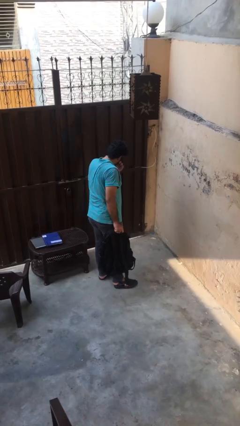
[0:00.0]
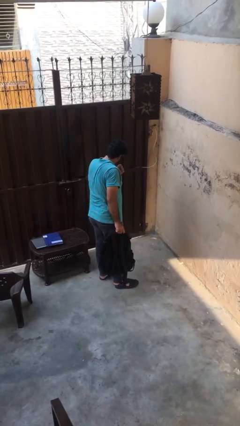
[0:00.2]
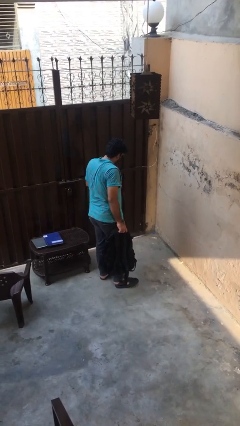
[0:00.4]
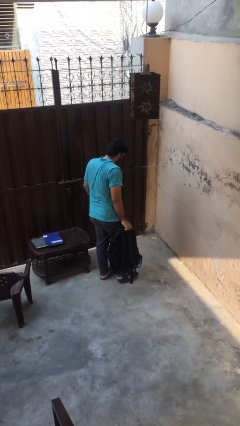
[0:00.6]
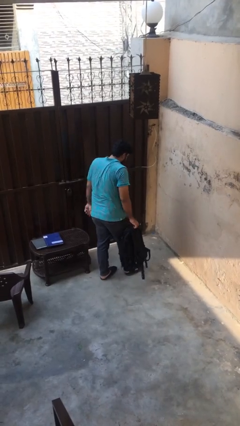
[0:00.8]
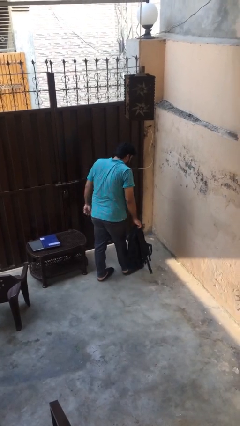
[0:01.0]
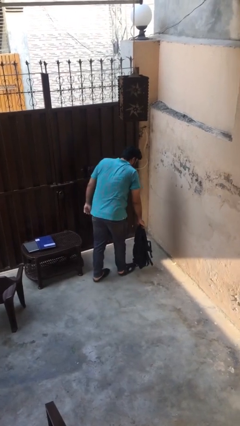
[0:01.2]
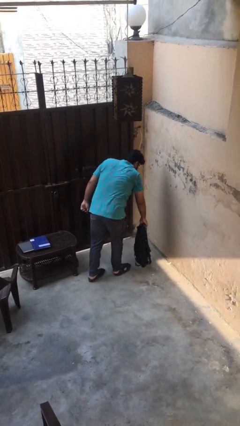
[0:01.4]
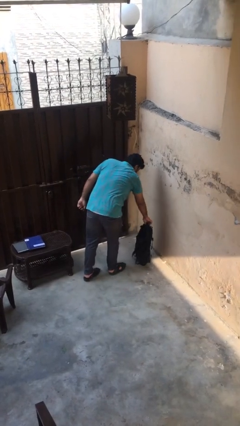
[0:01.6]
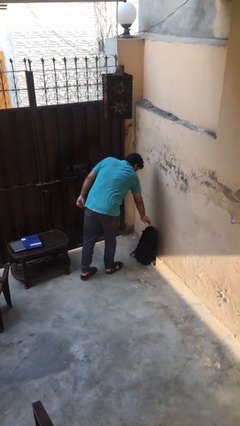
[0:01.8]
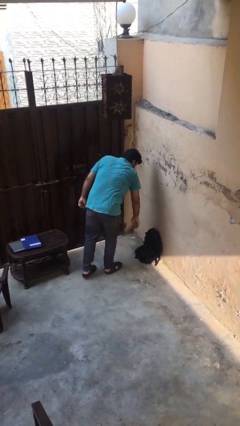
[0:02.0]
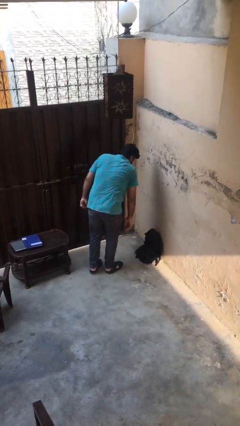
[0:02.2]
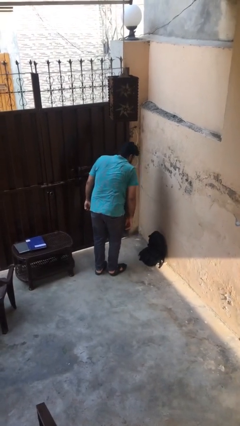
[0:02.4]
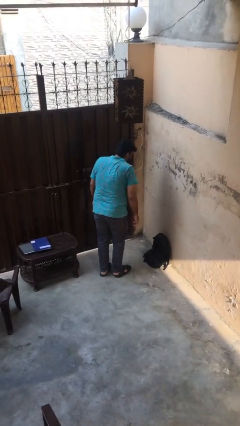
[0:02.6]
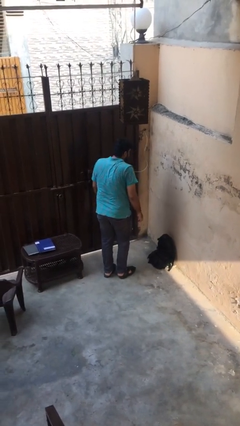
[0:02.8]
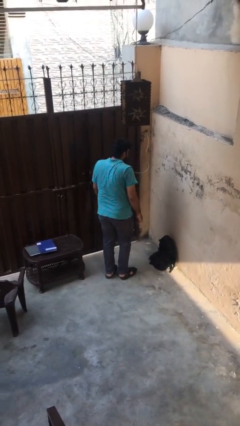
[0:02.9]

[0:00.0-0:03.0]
person puts down object on floor

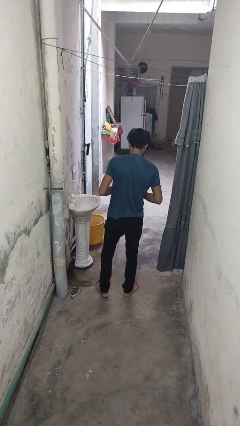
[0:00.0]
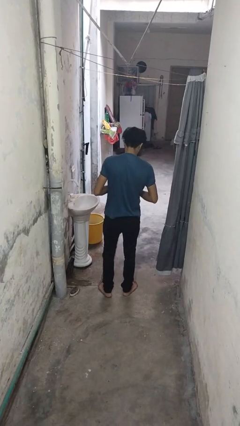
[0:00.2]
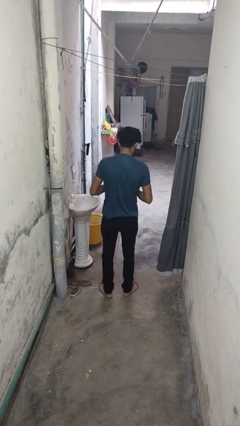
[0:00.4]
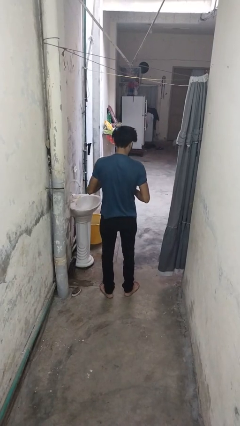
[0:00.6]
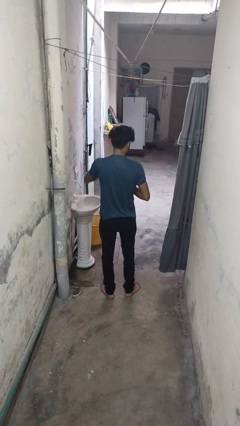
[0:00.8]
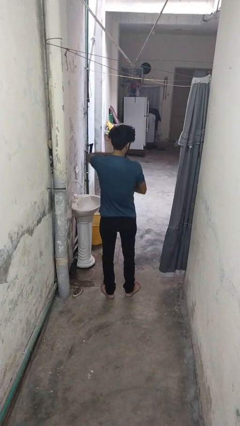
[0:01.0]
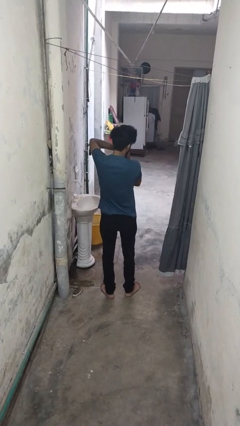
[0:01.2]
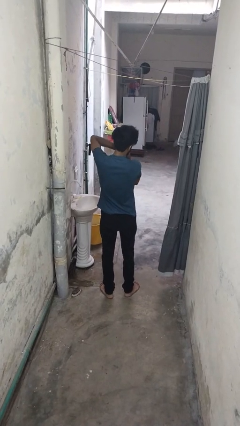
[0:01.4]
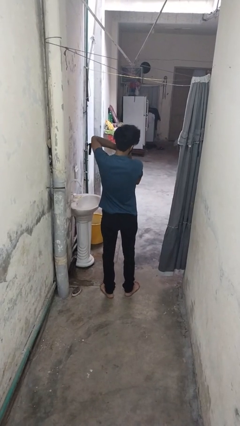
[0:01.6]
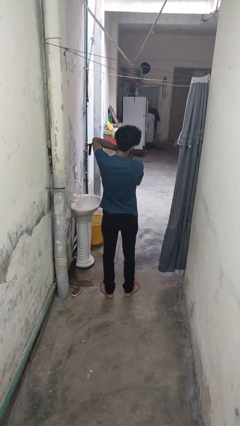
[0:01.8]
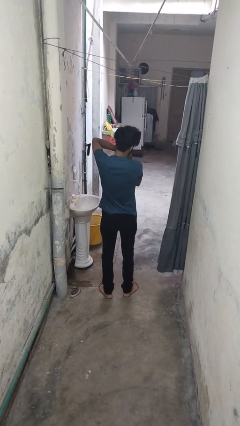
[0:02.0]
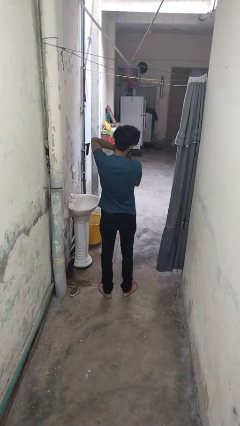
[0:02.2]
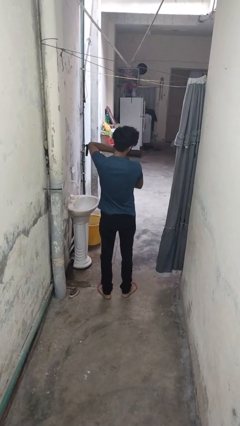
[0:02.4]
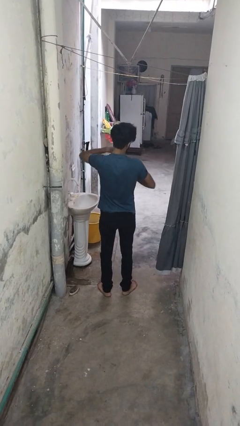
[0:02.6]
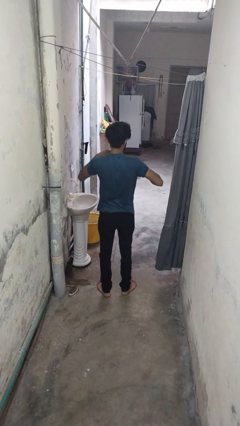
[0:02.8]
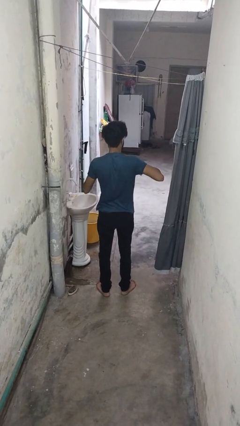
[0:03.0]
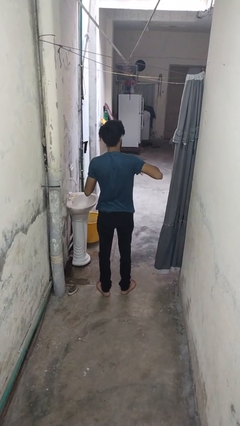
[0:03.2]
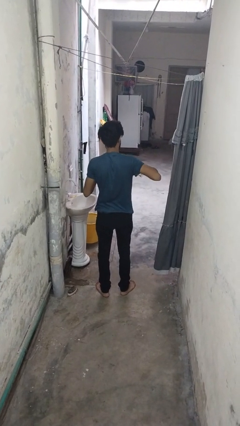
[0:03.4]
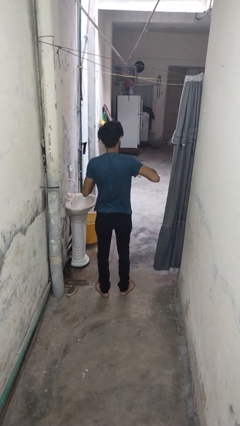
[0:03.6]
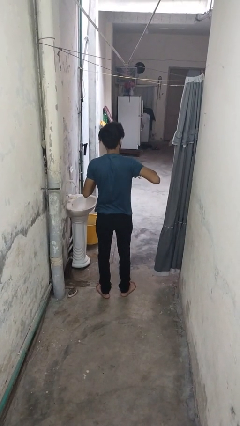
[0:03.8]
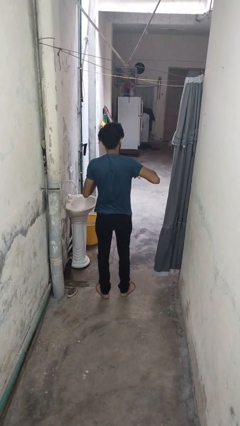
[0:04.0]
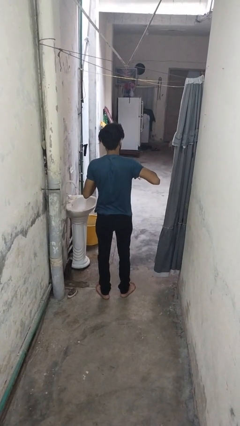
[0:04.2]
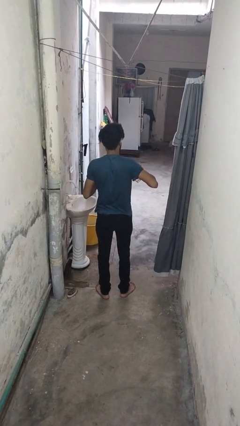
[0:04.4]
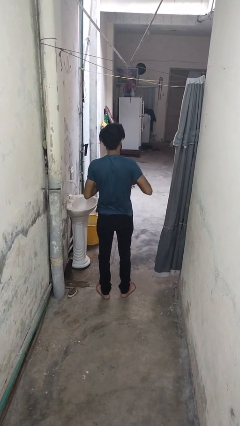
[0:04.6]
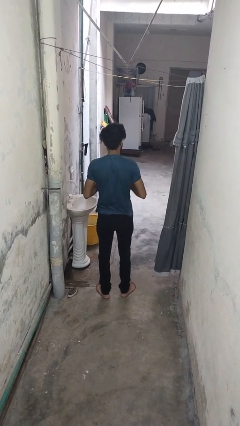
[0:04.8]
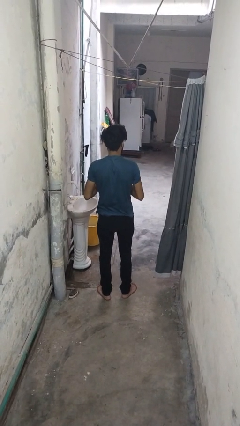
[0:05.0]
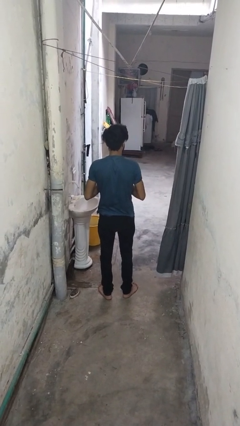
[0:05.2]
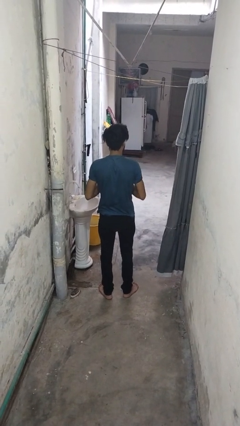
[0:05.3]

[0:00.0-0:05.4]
person applies deodorant

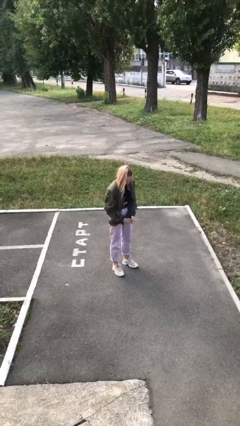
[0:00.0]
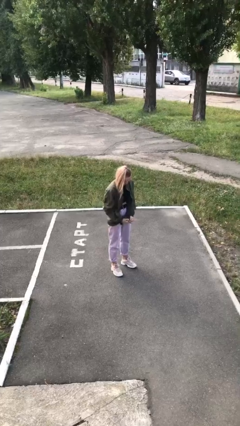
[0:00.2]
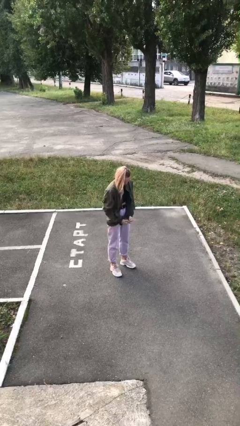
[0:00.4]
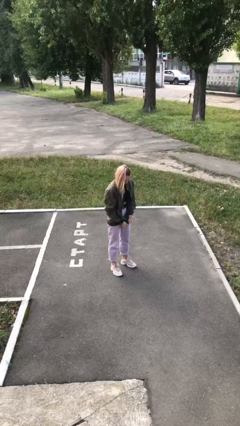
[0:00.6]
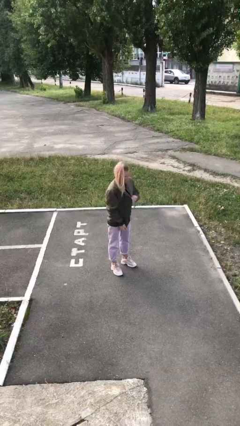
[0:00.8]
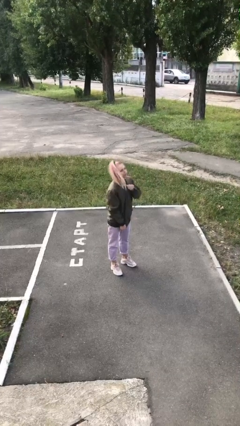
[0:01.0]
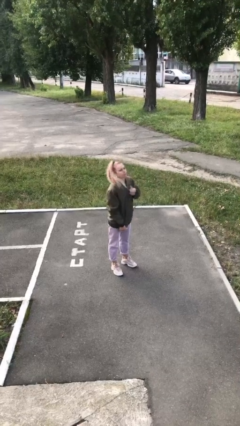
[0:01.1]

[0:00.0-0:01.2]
person zips up jacket

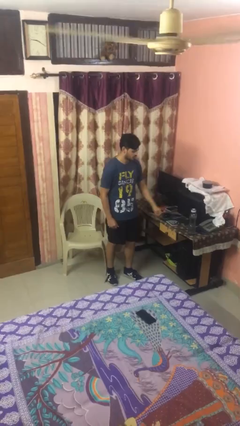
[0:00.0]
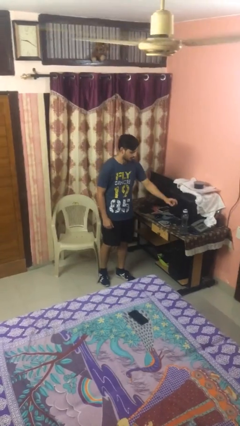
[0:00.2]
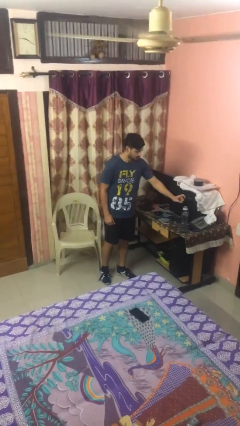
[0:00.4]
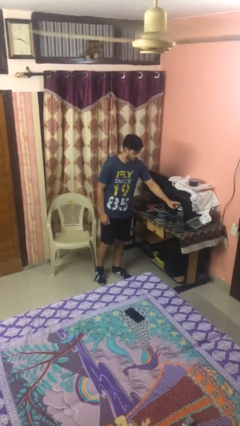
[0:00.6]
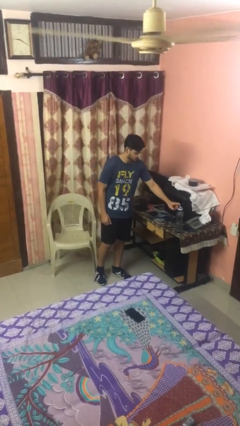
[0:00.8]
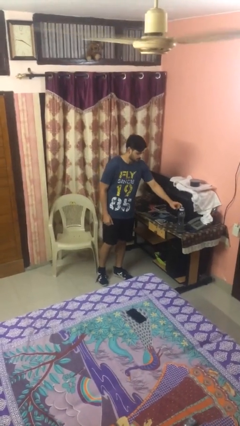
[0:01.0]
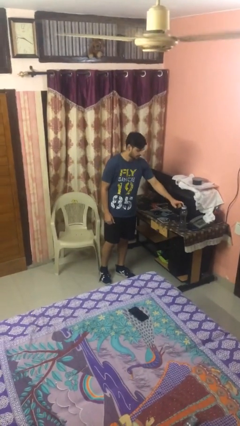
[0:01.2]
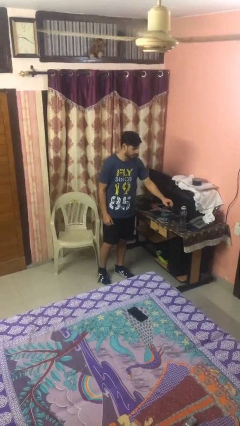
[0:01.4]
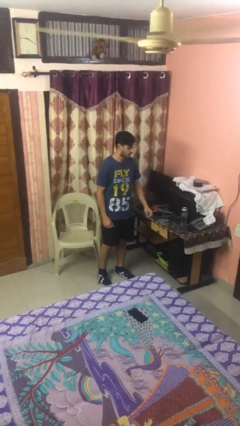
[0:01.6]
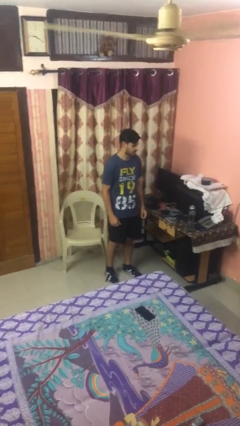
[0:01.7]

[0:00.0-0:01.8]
person taps object with finger

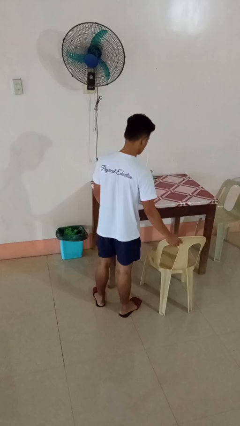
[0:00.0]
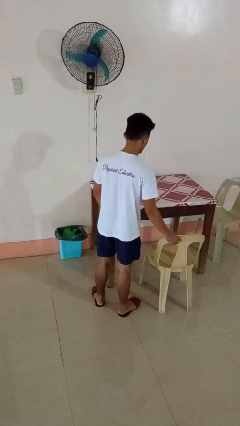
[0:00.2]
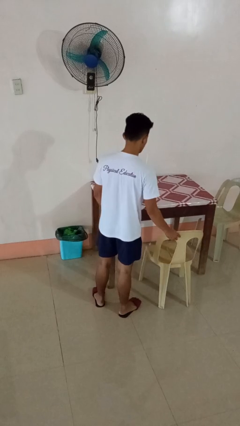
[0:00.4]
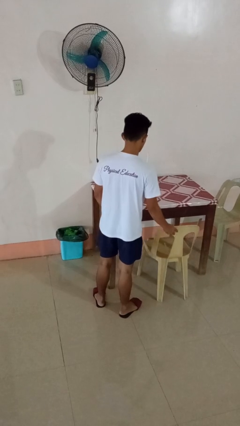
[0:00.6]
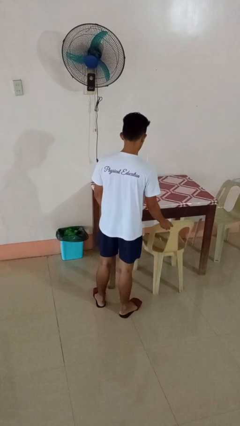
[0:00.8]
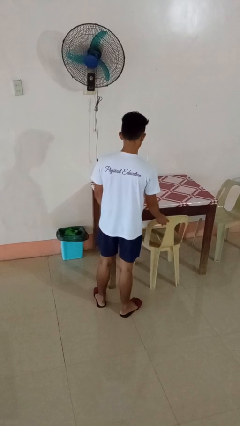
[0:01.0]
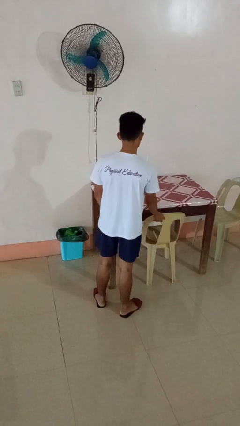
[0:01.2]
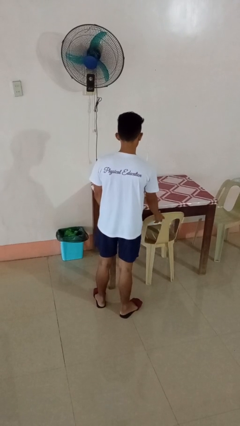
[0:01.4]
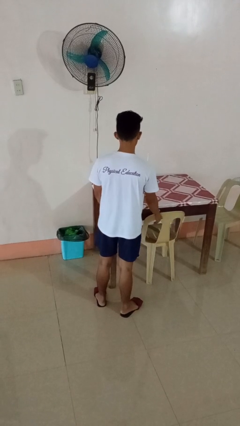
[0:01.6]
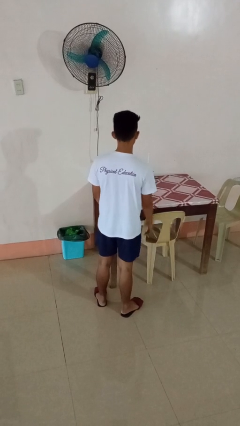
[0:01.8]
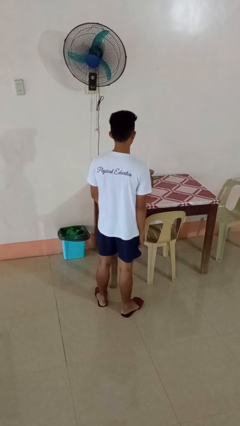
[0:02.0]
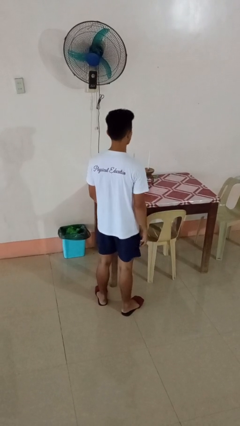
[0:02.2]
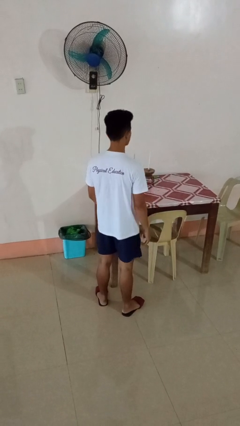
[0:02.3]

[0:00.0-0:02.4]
person pushes in chair

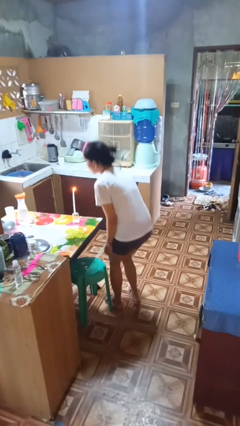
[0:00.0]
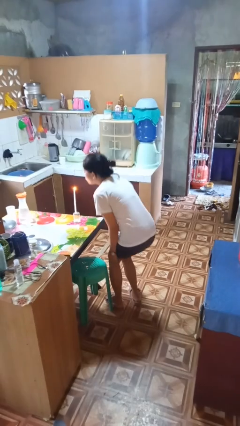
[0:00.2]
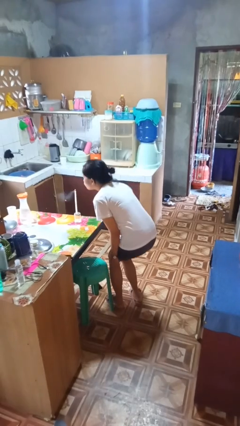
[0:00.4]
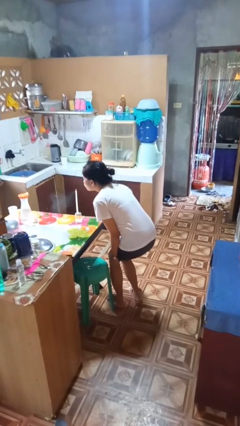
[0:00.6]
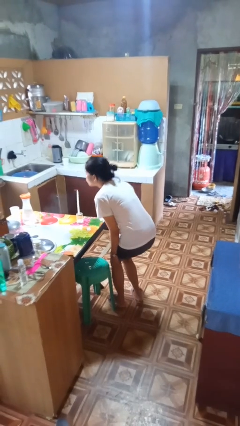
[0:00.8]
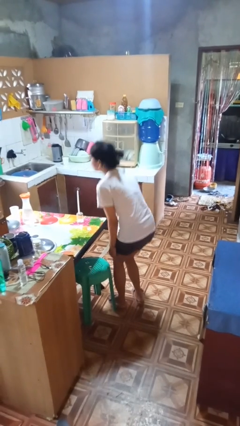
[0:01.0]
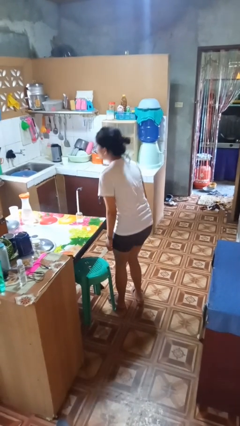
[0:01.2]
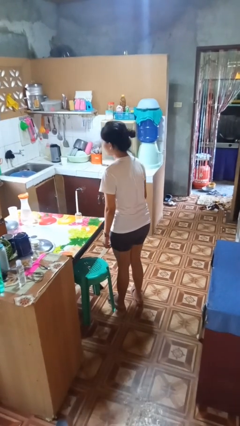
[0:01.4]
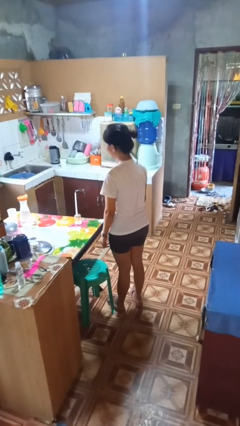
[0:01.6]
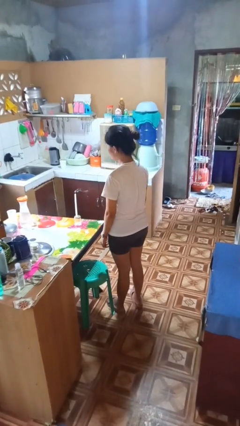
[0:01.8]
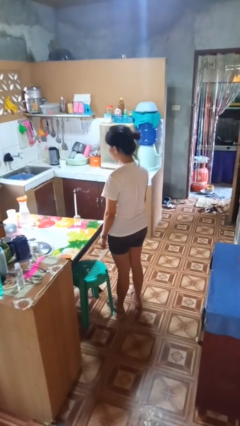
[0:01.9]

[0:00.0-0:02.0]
person extinguishes candle

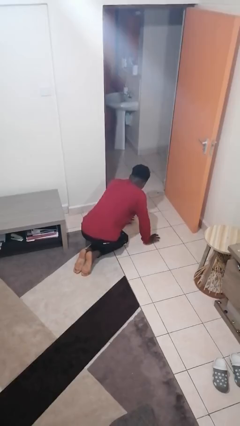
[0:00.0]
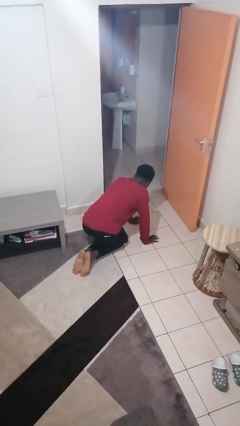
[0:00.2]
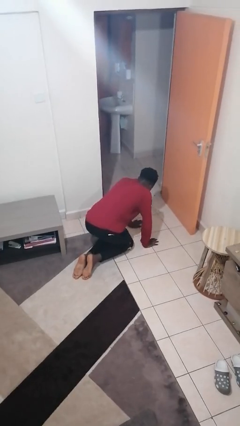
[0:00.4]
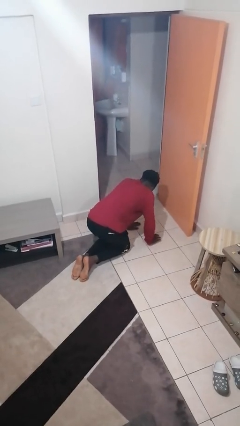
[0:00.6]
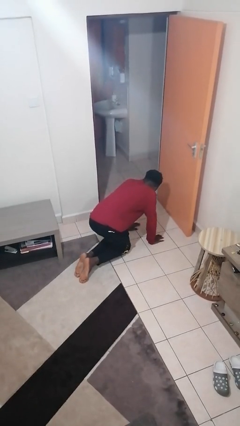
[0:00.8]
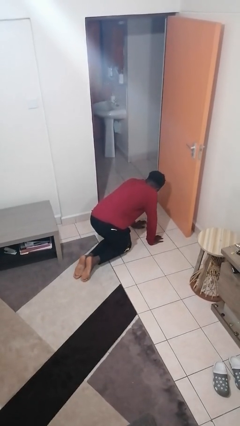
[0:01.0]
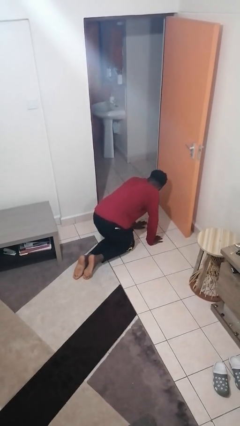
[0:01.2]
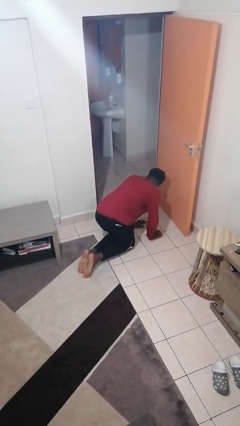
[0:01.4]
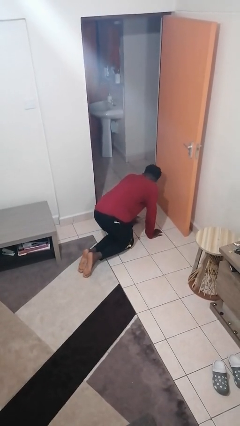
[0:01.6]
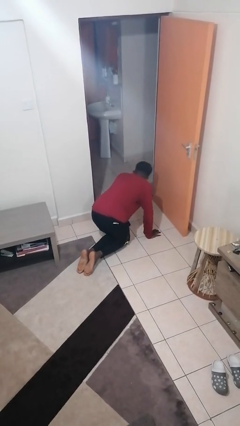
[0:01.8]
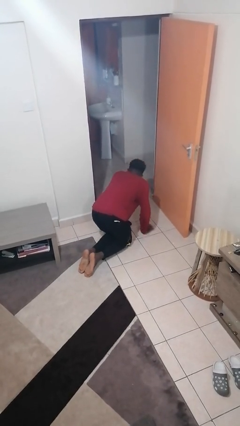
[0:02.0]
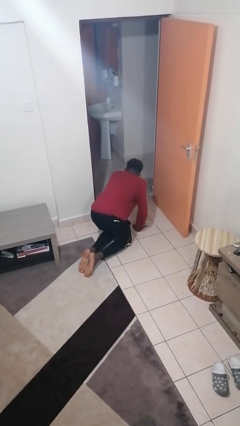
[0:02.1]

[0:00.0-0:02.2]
person crawls
